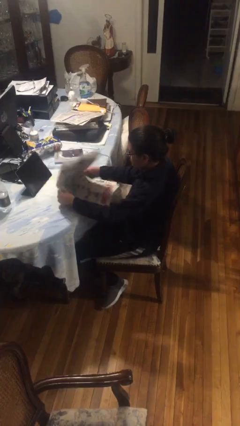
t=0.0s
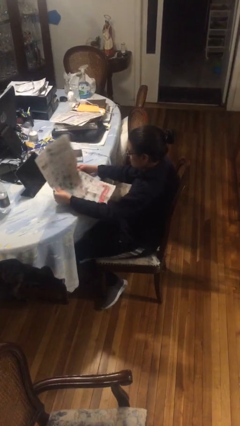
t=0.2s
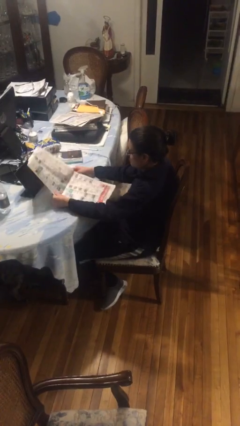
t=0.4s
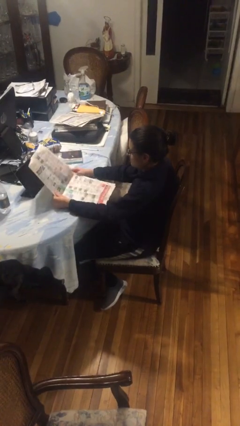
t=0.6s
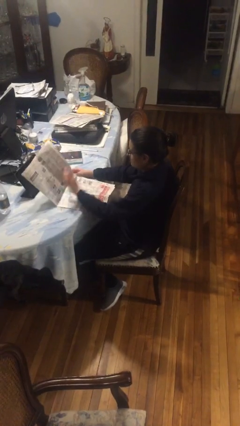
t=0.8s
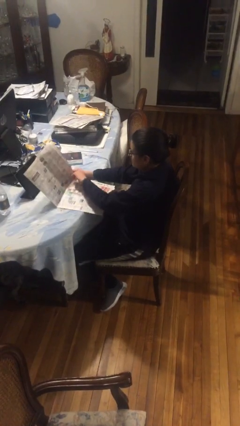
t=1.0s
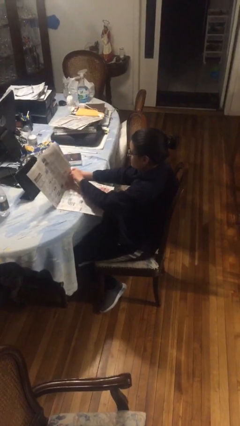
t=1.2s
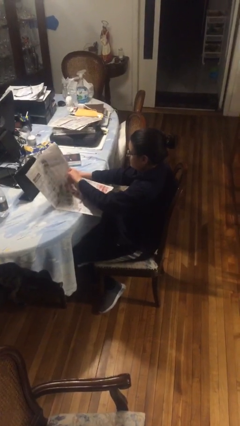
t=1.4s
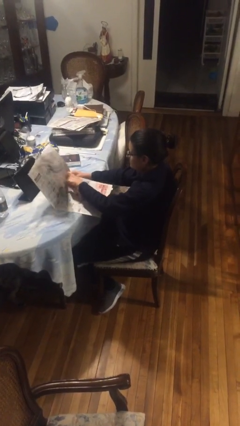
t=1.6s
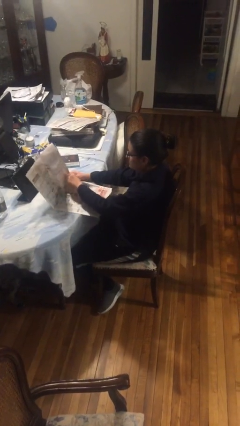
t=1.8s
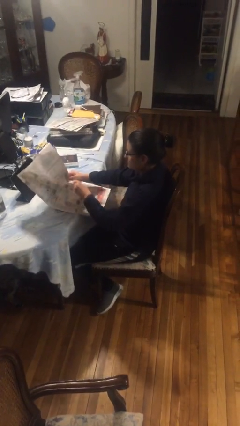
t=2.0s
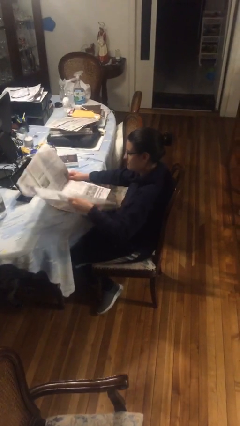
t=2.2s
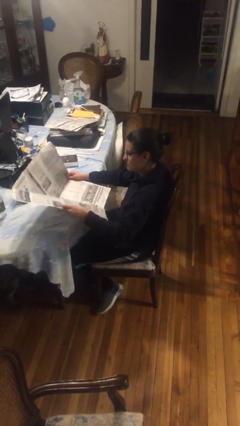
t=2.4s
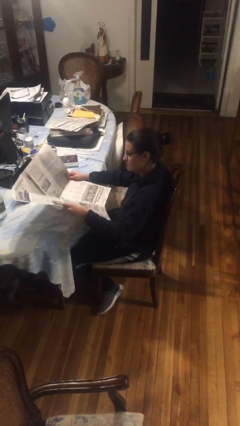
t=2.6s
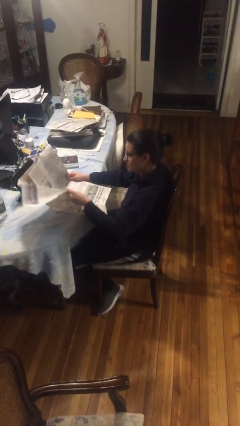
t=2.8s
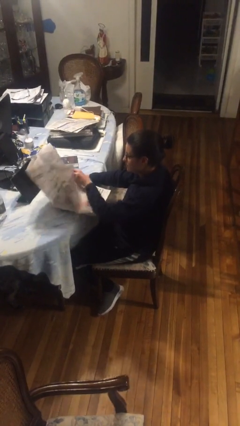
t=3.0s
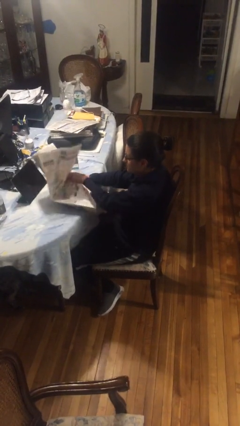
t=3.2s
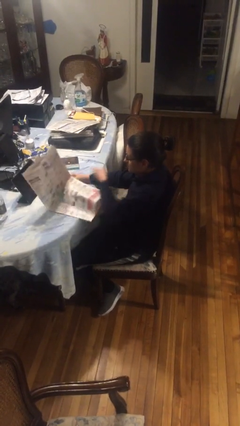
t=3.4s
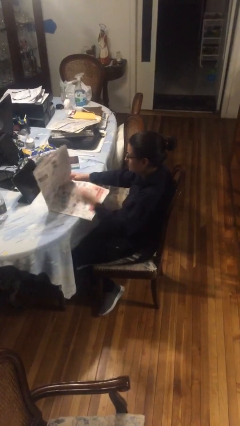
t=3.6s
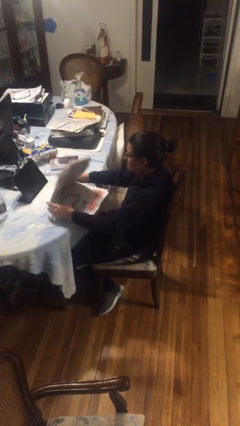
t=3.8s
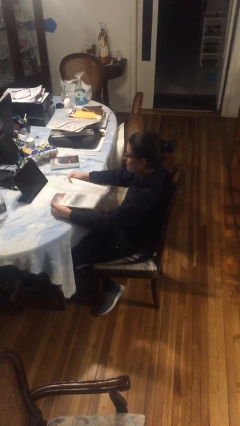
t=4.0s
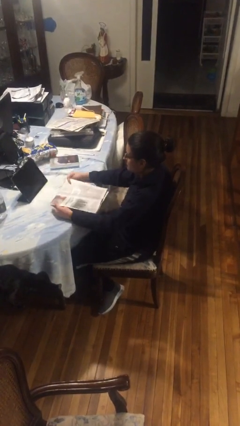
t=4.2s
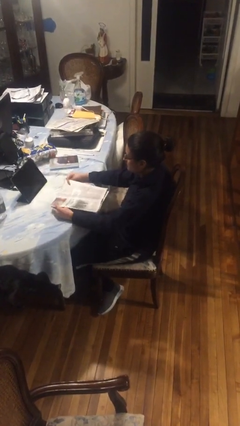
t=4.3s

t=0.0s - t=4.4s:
person reads newspaper

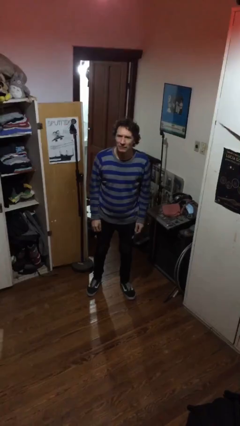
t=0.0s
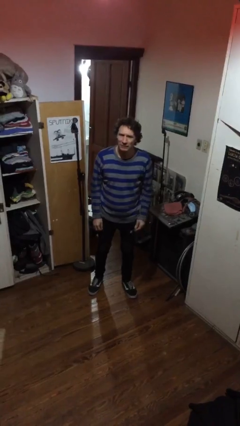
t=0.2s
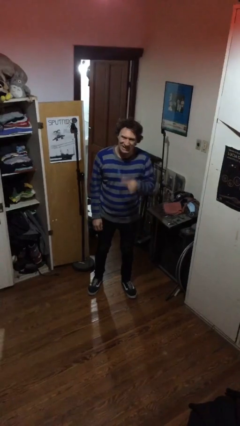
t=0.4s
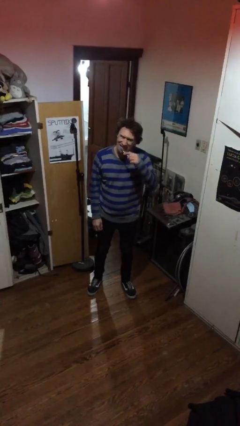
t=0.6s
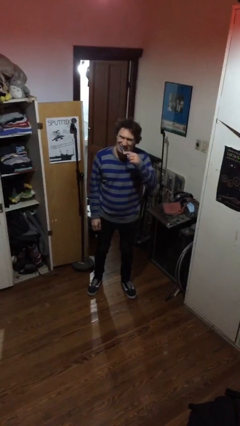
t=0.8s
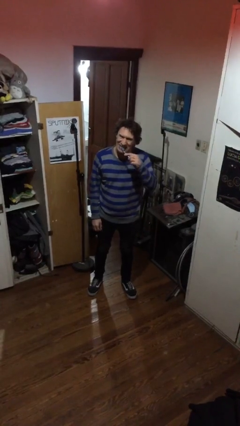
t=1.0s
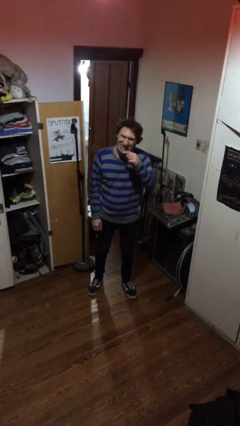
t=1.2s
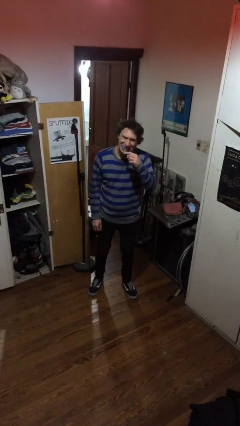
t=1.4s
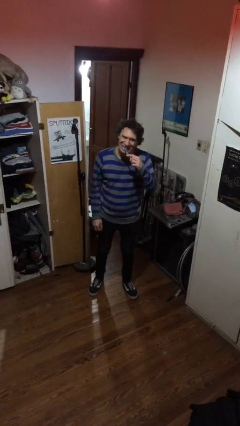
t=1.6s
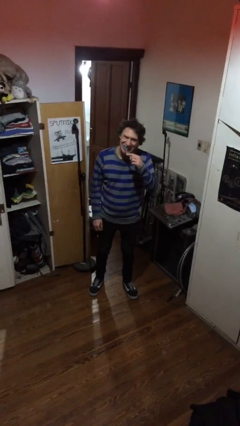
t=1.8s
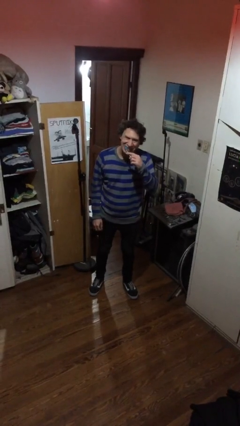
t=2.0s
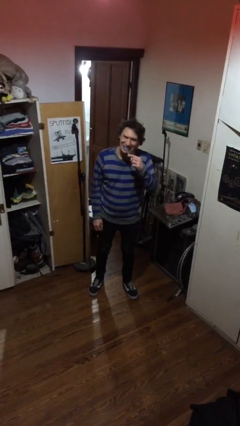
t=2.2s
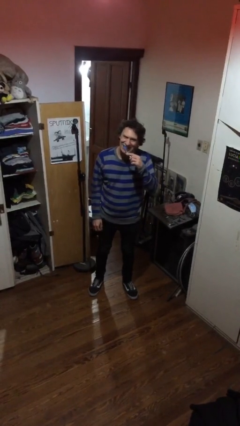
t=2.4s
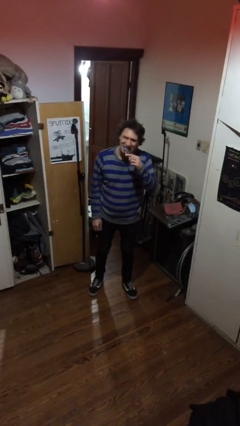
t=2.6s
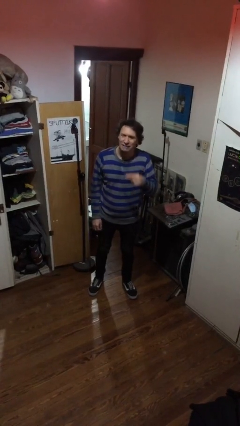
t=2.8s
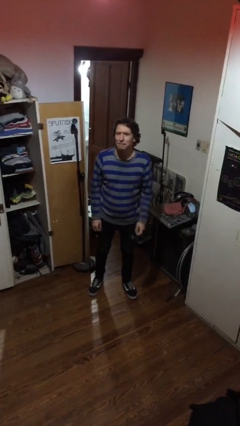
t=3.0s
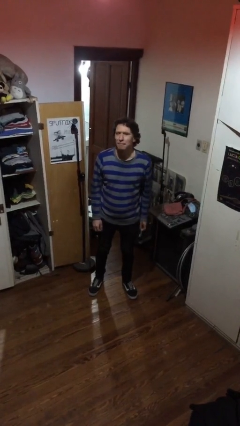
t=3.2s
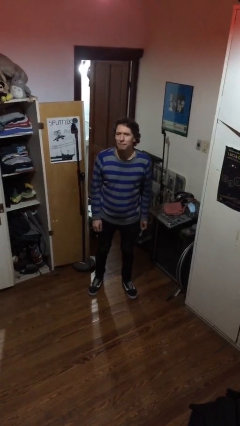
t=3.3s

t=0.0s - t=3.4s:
person brushes teeth

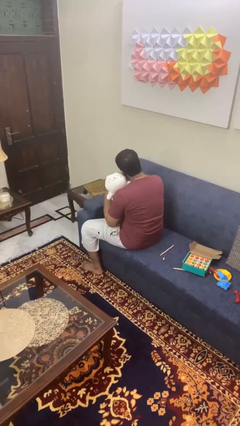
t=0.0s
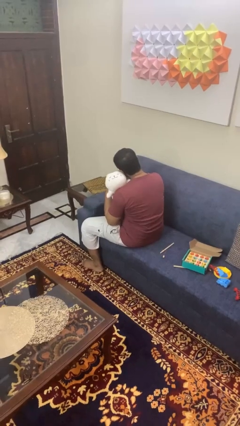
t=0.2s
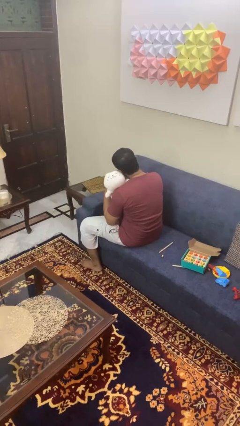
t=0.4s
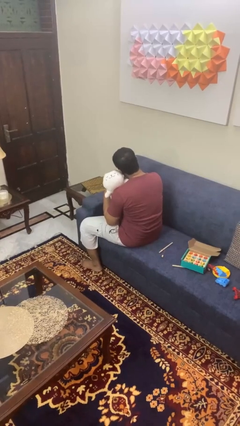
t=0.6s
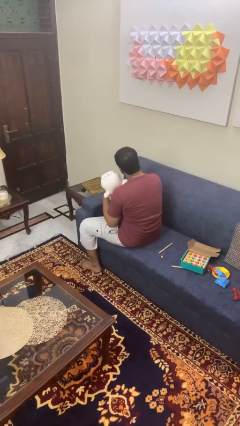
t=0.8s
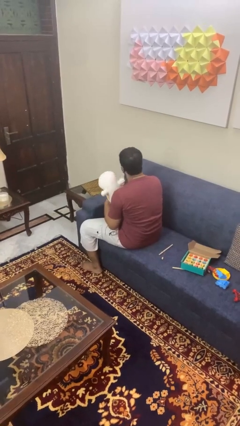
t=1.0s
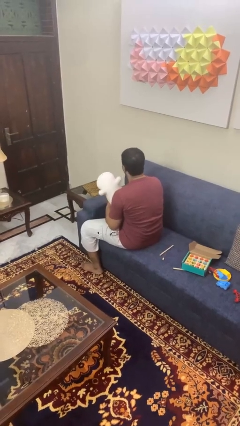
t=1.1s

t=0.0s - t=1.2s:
person hugs stuffed animal

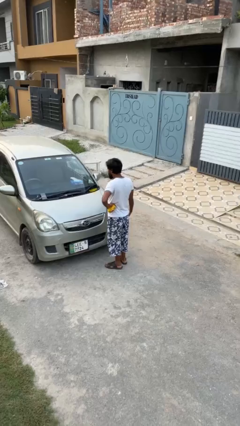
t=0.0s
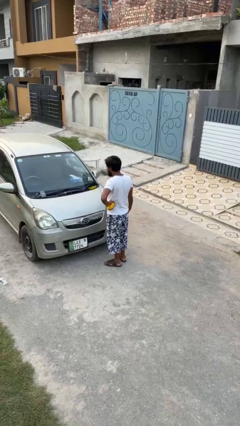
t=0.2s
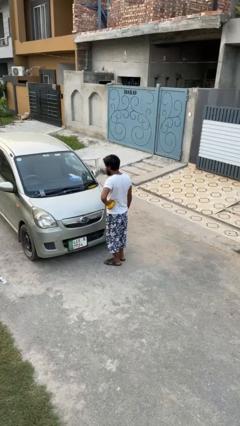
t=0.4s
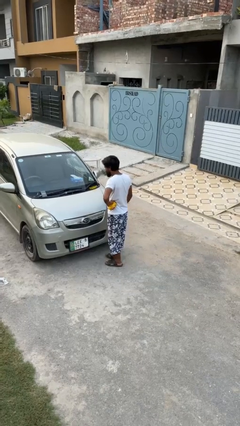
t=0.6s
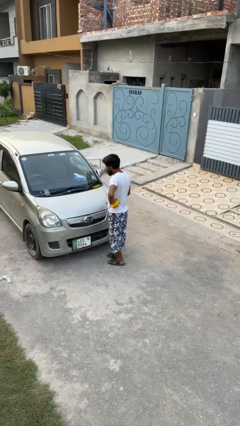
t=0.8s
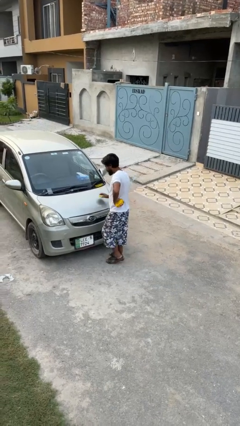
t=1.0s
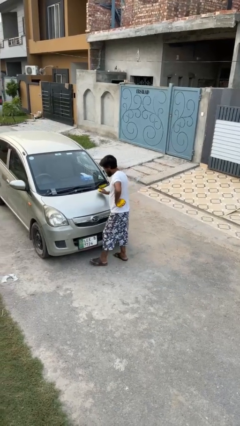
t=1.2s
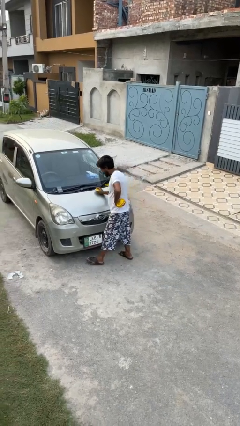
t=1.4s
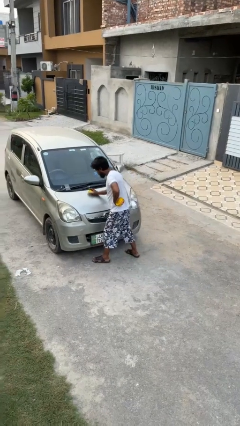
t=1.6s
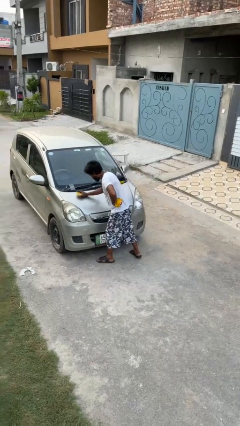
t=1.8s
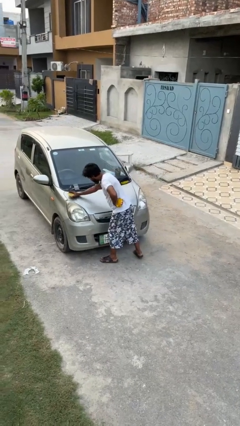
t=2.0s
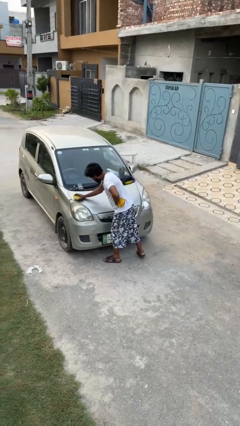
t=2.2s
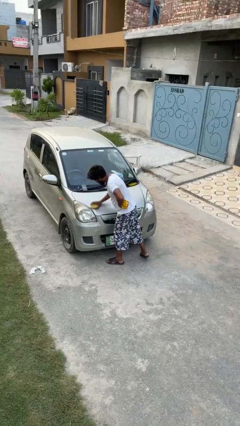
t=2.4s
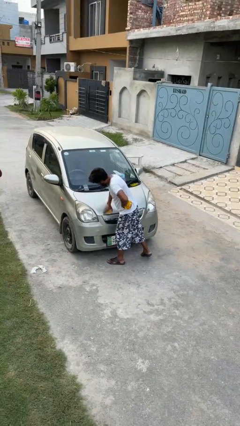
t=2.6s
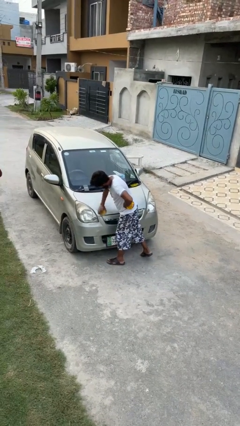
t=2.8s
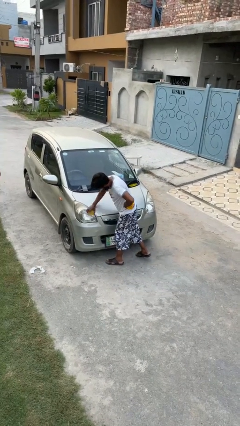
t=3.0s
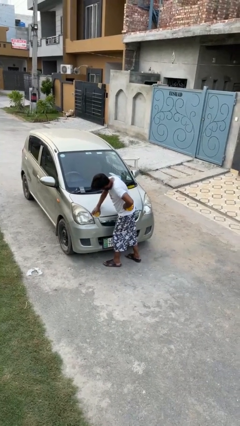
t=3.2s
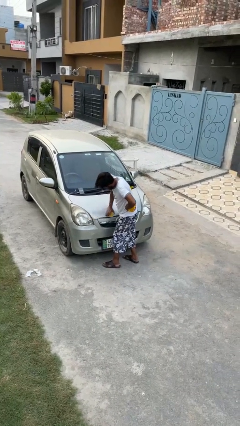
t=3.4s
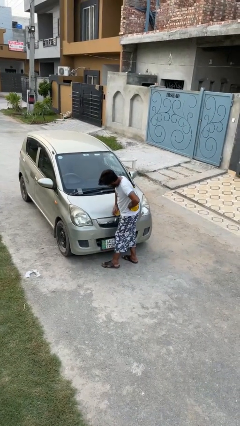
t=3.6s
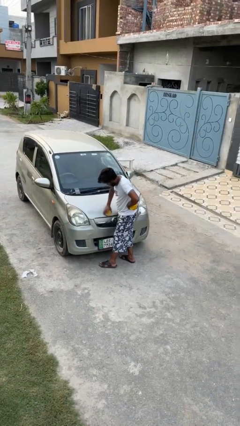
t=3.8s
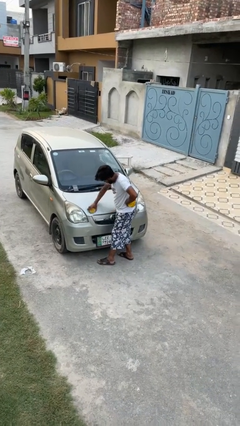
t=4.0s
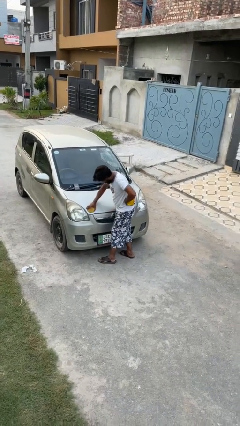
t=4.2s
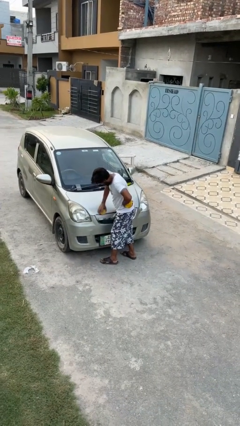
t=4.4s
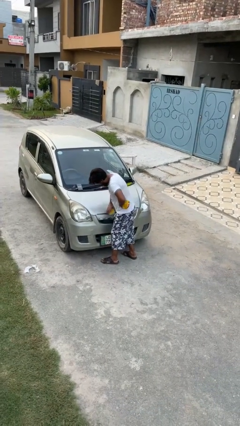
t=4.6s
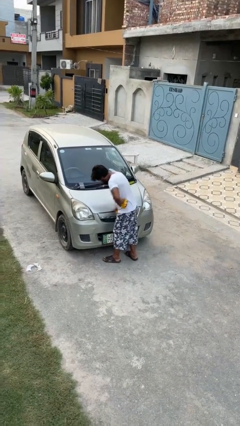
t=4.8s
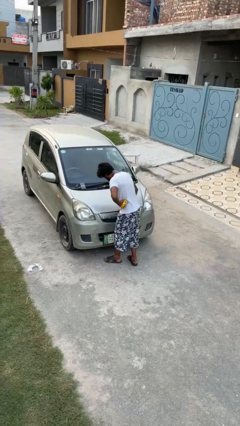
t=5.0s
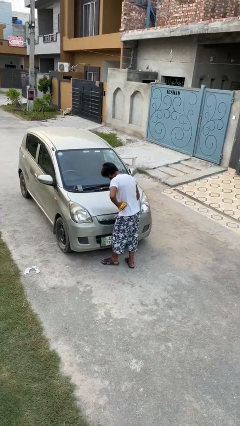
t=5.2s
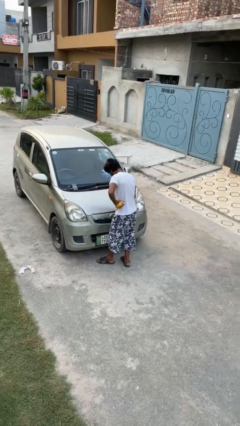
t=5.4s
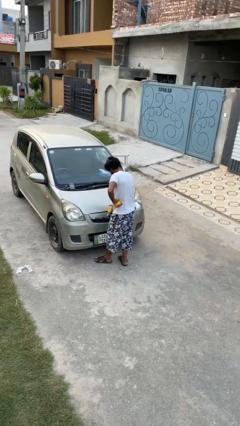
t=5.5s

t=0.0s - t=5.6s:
person polishes car with rag

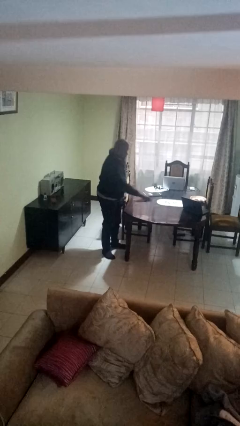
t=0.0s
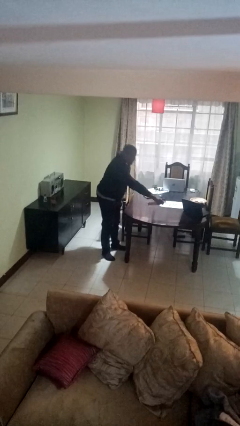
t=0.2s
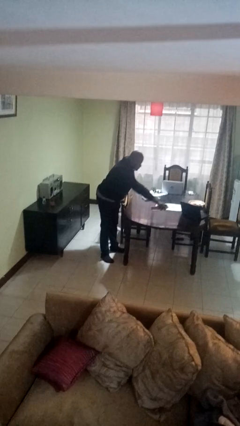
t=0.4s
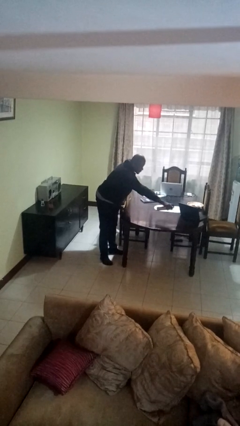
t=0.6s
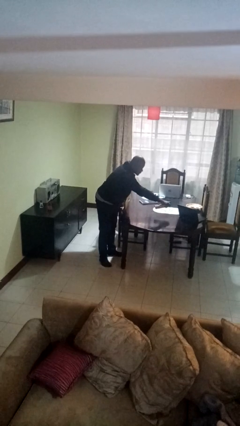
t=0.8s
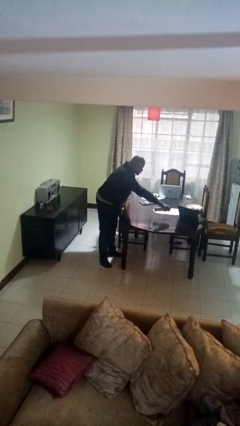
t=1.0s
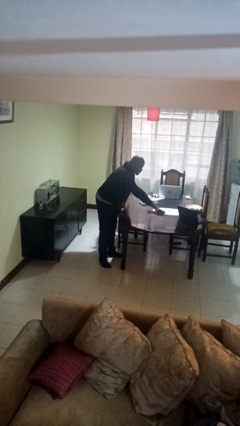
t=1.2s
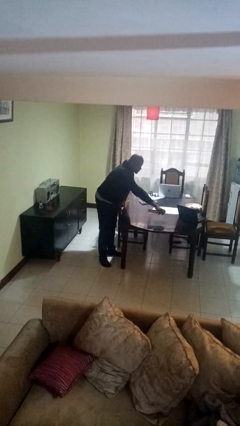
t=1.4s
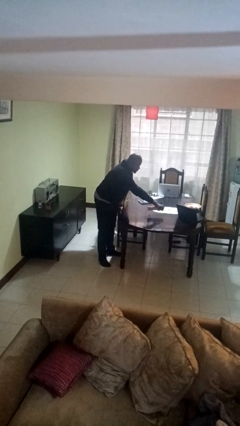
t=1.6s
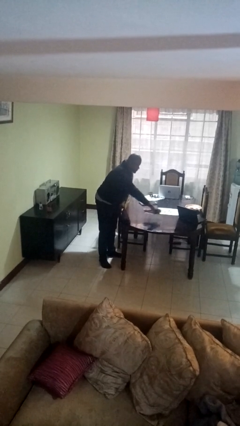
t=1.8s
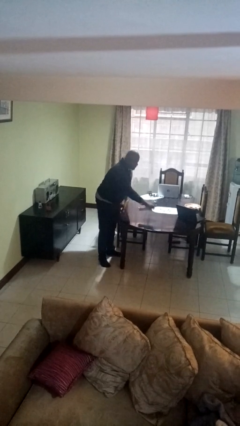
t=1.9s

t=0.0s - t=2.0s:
person sprays from bottle

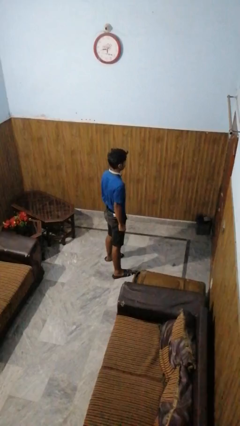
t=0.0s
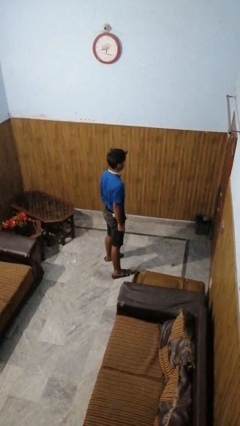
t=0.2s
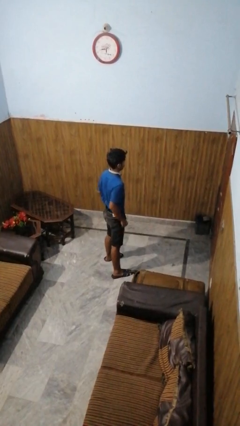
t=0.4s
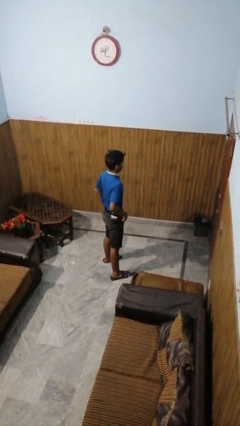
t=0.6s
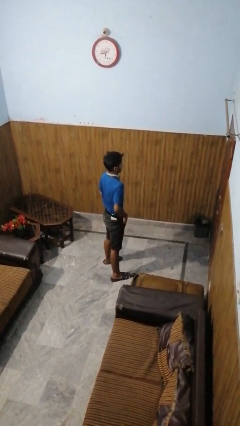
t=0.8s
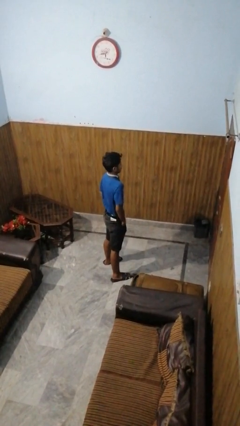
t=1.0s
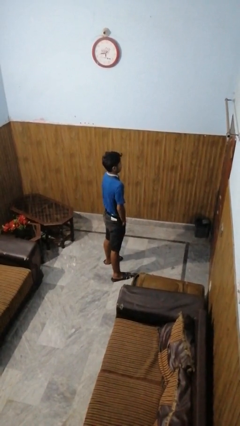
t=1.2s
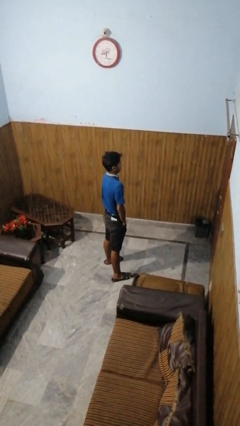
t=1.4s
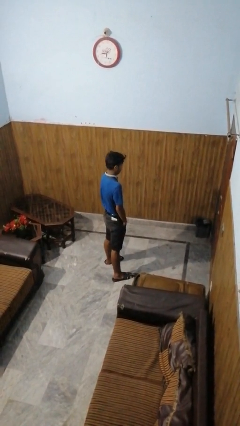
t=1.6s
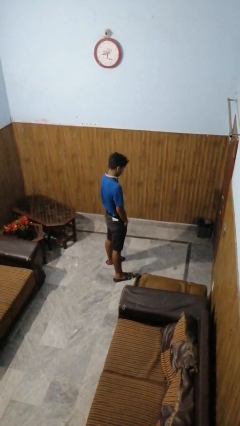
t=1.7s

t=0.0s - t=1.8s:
person puts hands in back pockets
